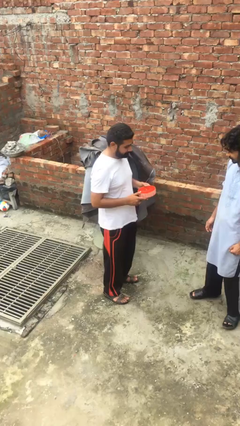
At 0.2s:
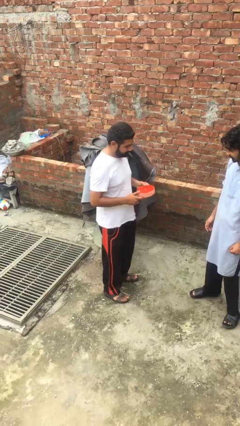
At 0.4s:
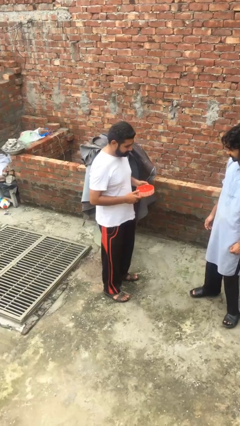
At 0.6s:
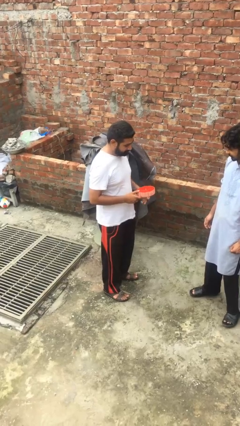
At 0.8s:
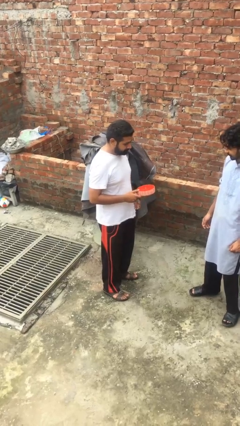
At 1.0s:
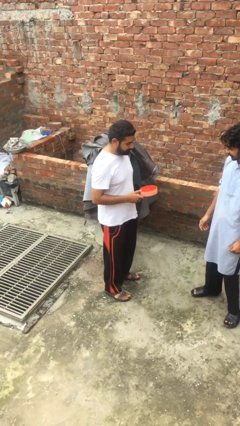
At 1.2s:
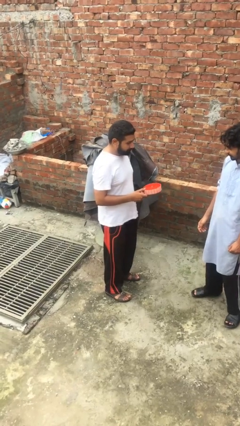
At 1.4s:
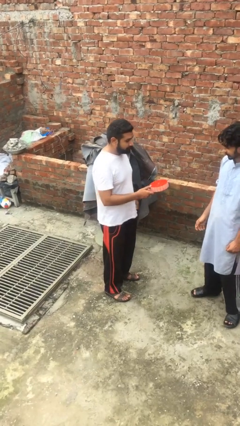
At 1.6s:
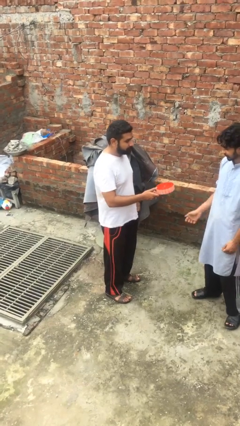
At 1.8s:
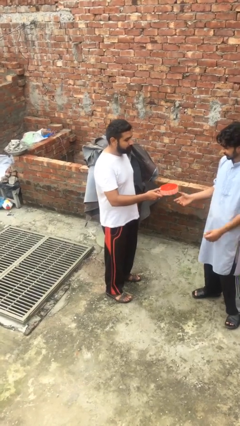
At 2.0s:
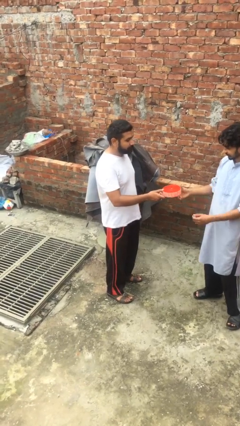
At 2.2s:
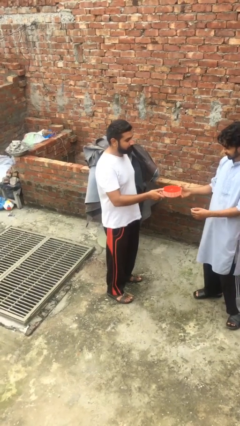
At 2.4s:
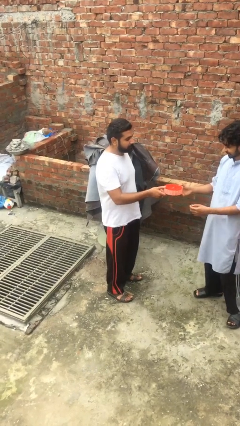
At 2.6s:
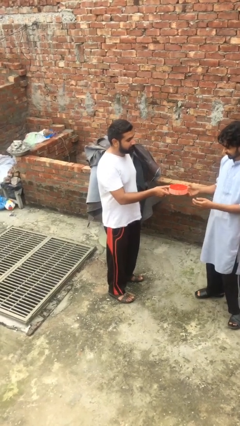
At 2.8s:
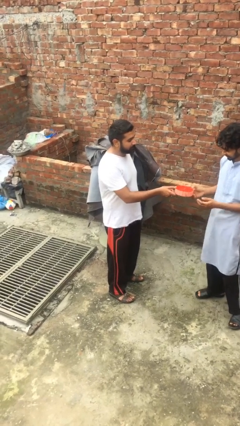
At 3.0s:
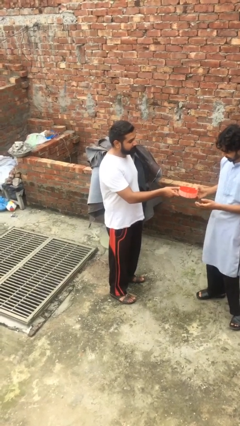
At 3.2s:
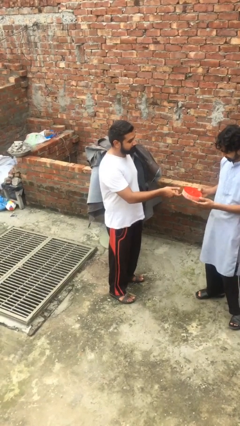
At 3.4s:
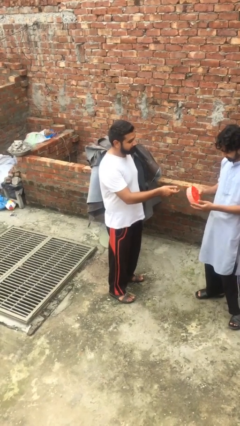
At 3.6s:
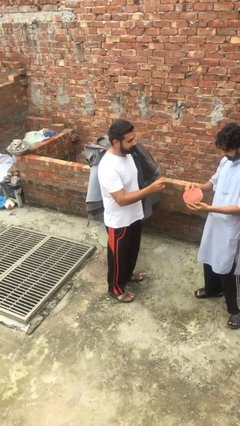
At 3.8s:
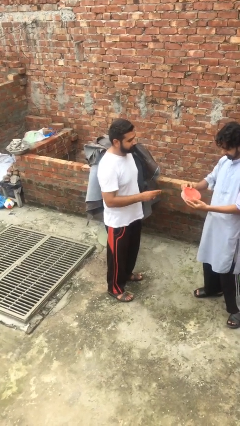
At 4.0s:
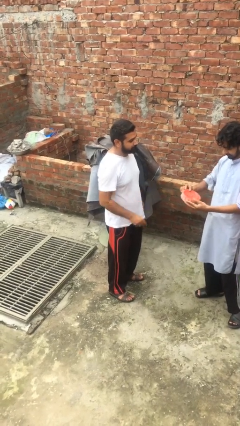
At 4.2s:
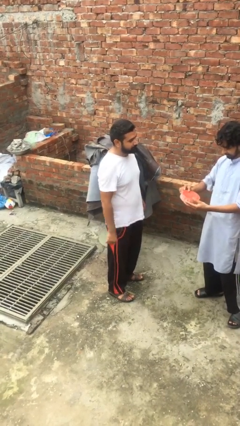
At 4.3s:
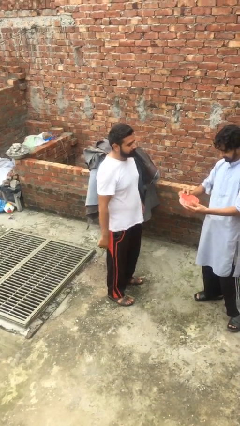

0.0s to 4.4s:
person transfers object to person

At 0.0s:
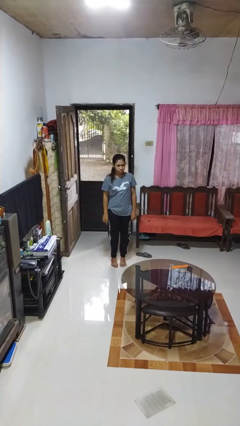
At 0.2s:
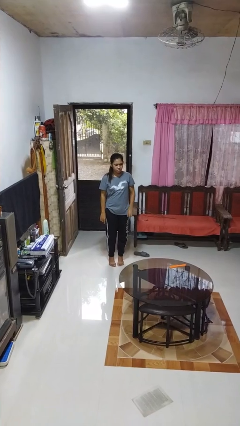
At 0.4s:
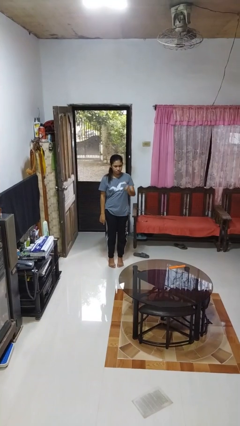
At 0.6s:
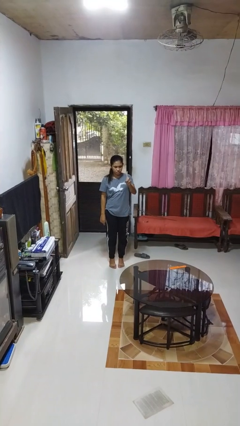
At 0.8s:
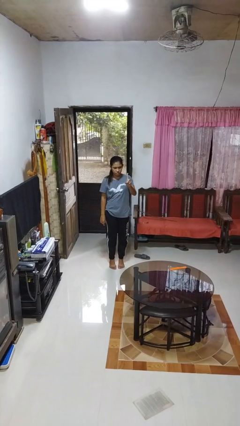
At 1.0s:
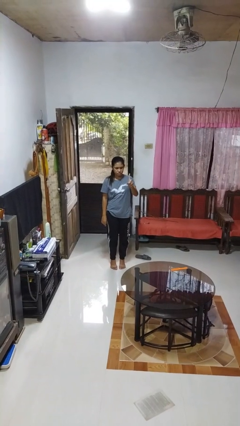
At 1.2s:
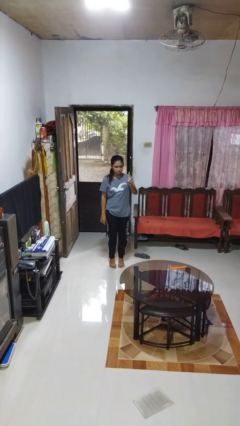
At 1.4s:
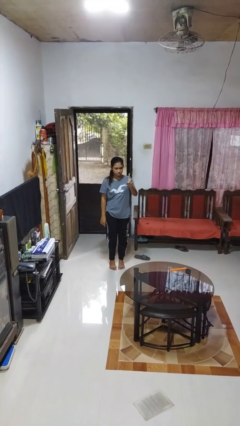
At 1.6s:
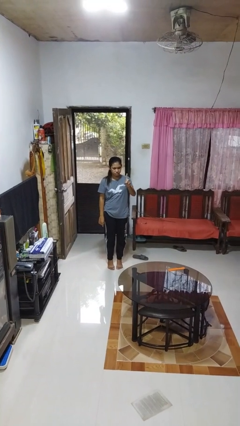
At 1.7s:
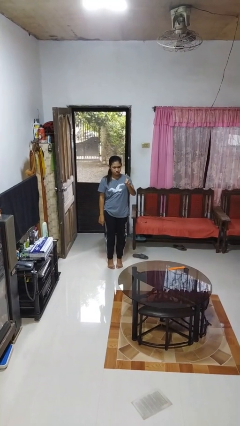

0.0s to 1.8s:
person gestures number one

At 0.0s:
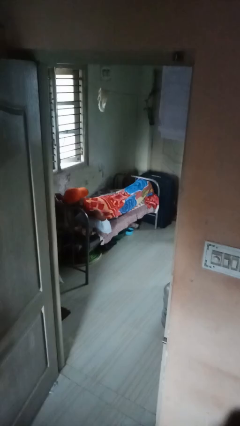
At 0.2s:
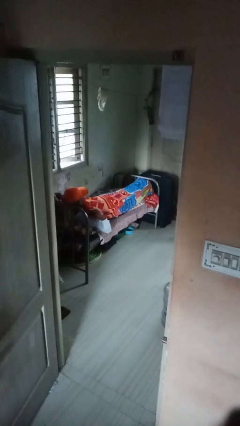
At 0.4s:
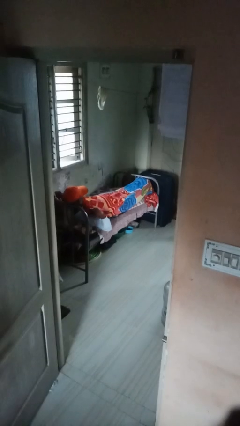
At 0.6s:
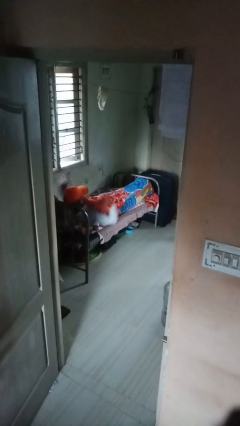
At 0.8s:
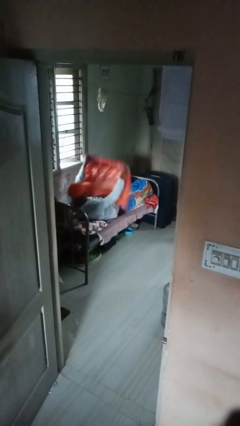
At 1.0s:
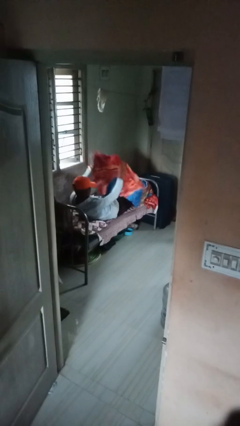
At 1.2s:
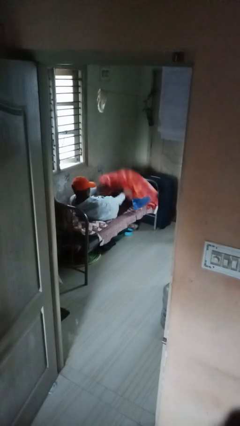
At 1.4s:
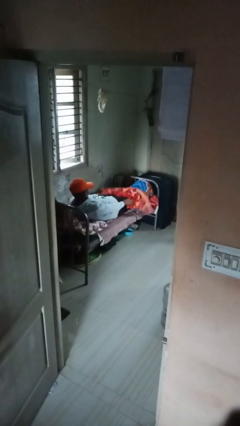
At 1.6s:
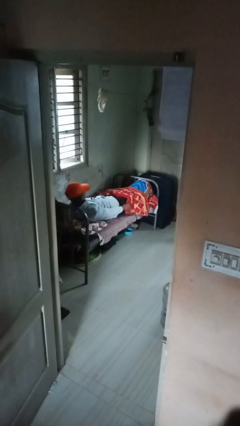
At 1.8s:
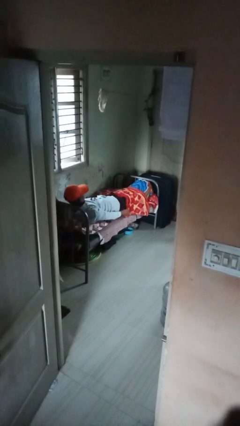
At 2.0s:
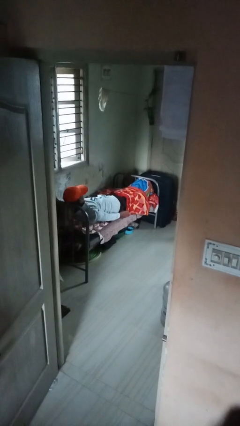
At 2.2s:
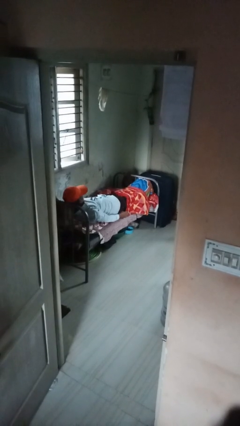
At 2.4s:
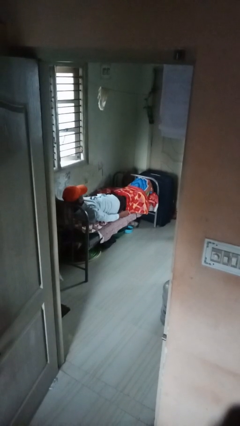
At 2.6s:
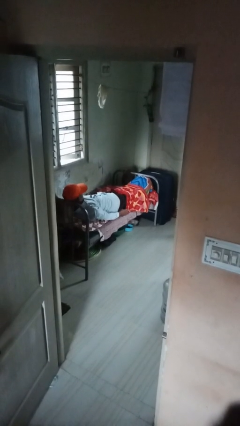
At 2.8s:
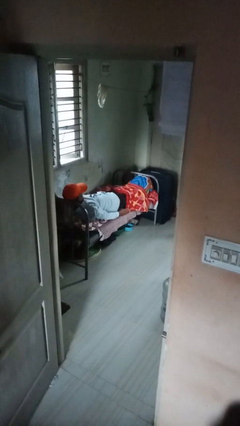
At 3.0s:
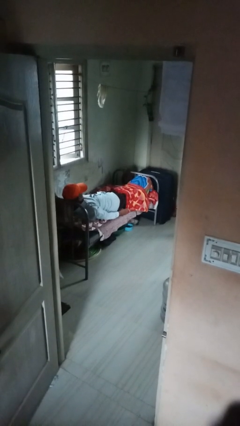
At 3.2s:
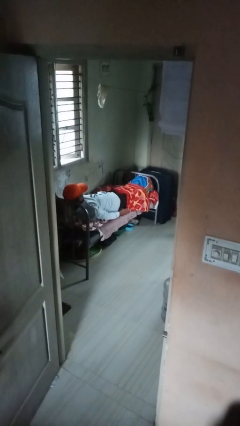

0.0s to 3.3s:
person uncovers with bedsheets

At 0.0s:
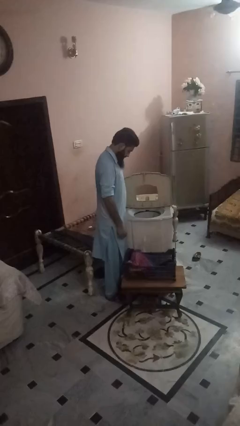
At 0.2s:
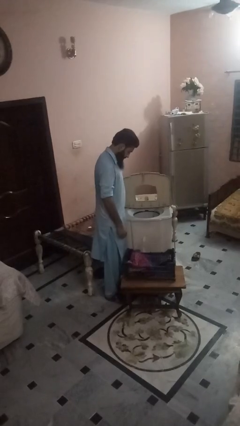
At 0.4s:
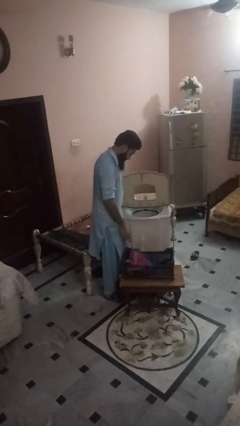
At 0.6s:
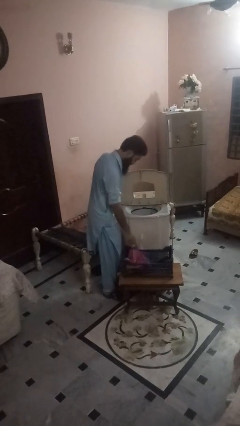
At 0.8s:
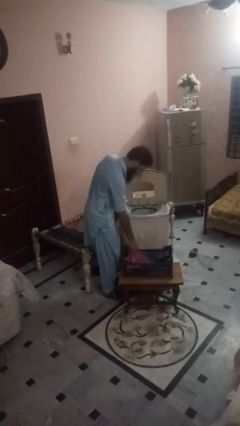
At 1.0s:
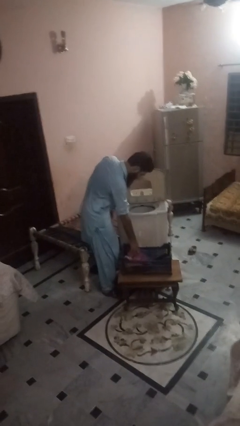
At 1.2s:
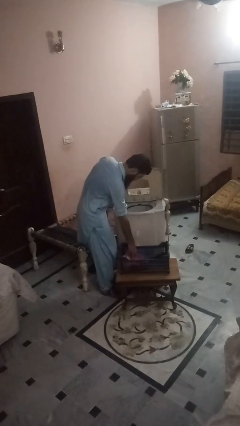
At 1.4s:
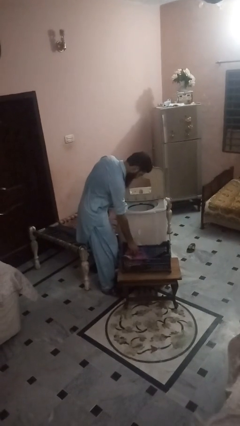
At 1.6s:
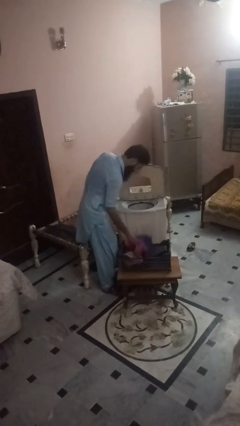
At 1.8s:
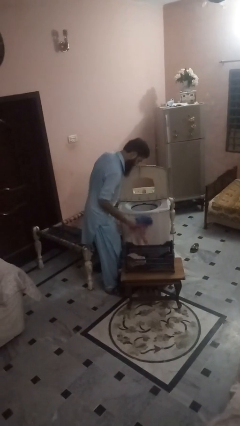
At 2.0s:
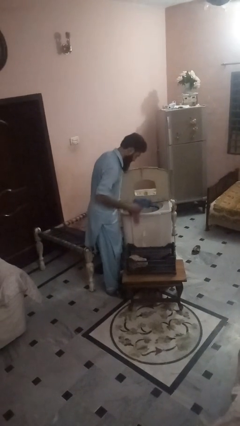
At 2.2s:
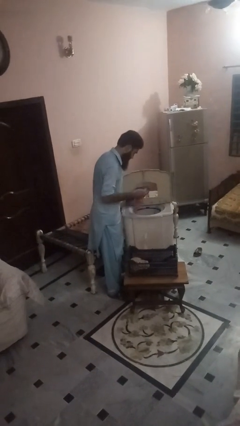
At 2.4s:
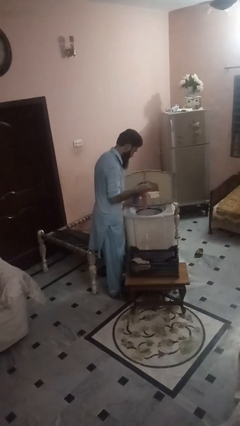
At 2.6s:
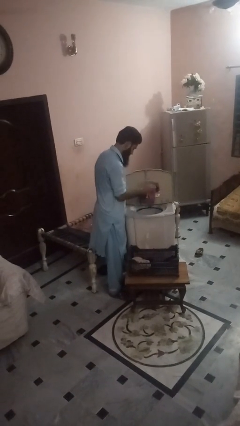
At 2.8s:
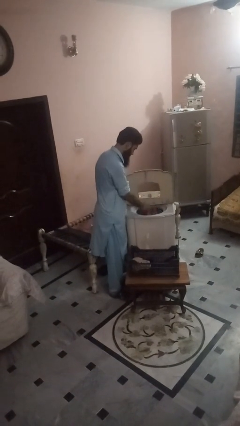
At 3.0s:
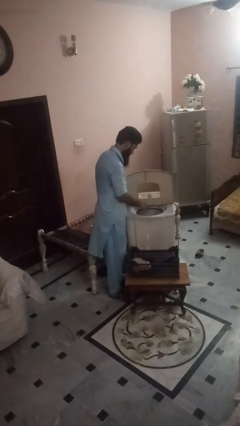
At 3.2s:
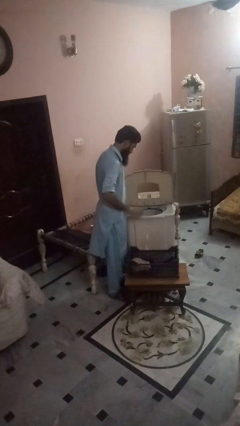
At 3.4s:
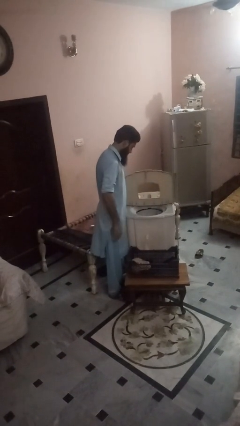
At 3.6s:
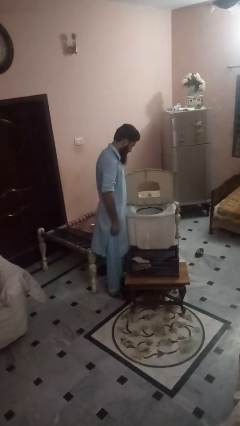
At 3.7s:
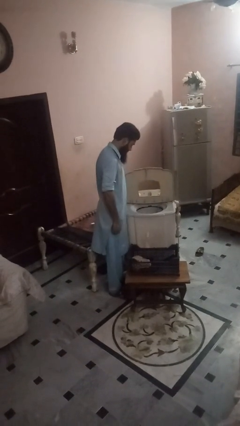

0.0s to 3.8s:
person loads dishwasher

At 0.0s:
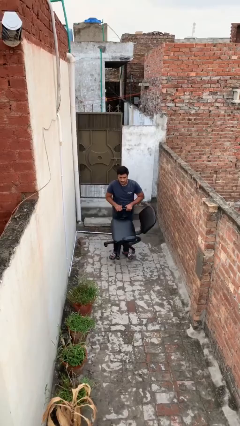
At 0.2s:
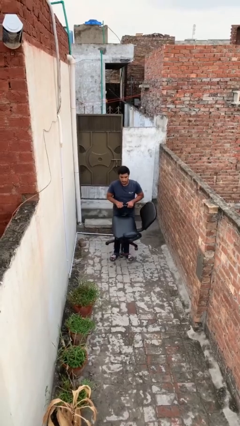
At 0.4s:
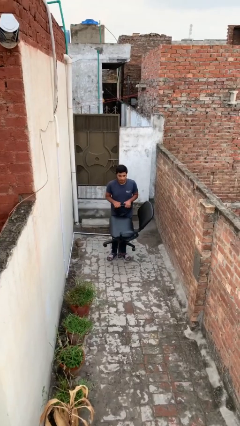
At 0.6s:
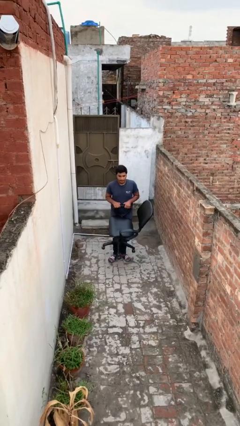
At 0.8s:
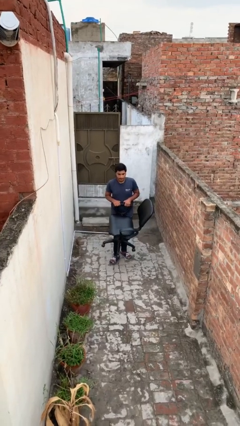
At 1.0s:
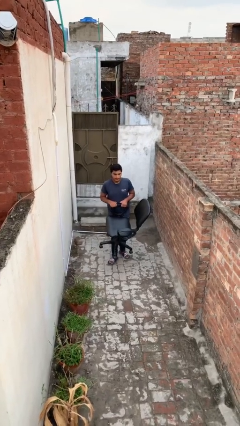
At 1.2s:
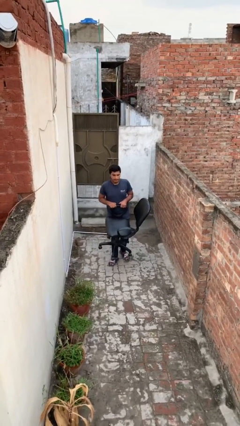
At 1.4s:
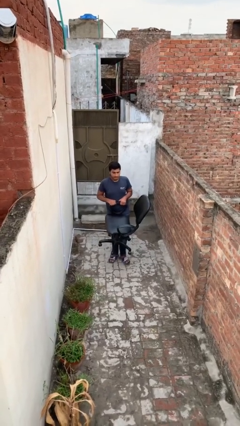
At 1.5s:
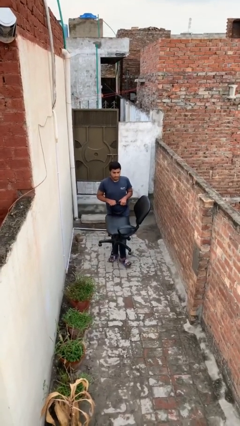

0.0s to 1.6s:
person carries heavy object

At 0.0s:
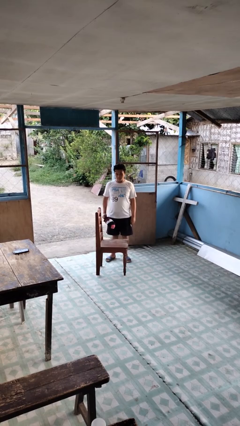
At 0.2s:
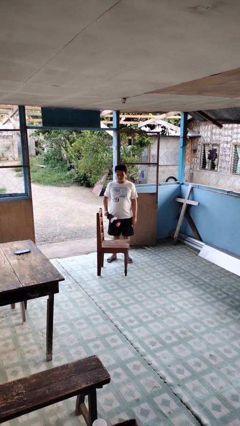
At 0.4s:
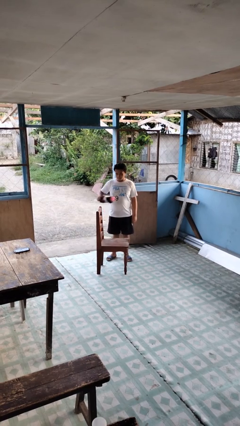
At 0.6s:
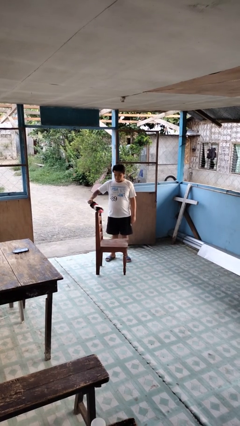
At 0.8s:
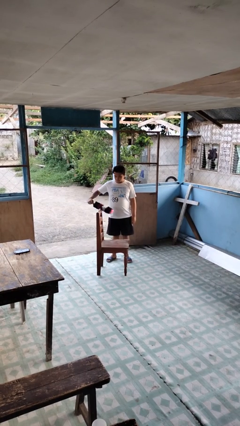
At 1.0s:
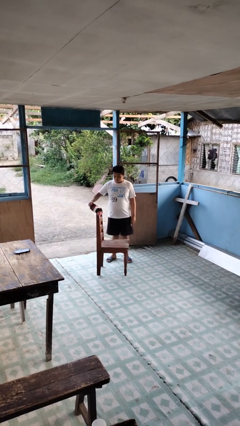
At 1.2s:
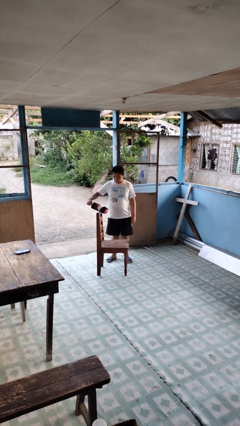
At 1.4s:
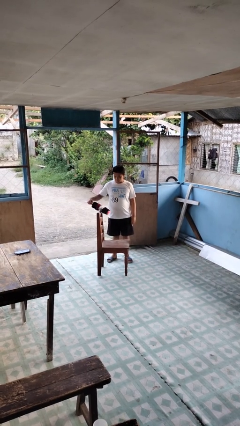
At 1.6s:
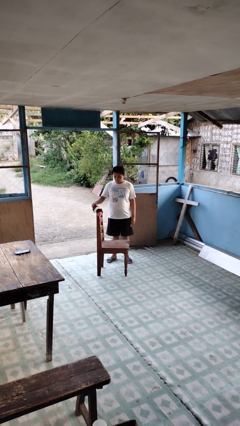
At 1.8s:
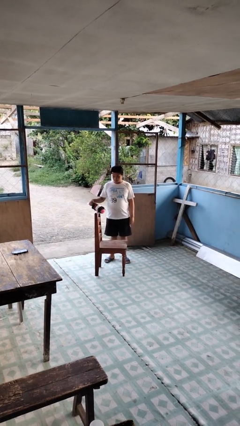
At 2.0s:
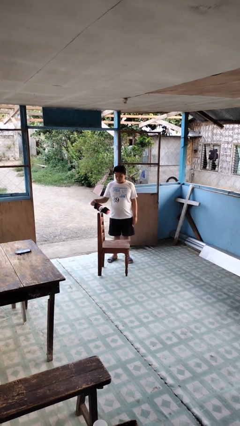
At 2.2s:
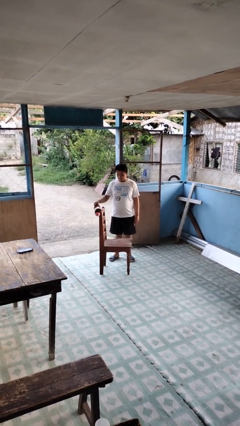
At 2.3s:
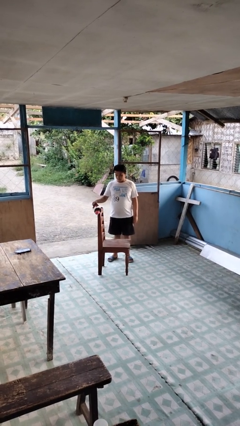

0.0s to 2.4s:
person dusts furniture
